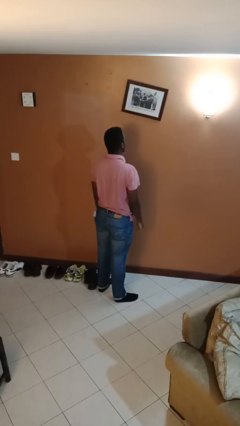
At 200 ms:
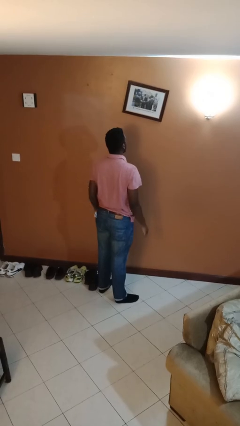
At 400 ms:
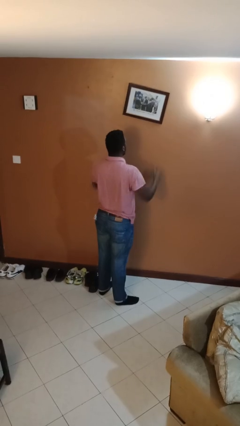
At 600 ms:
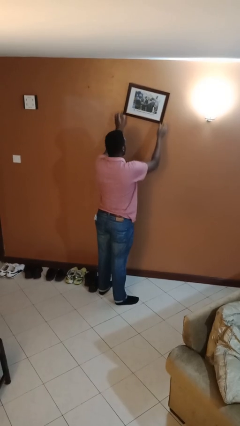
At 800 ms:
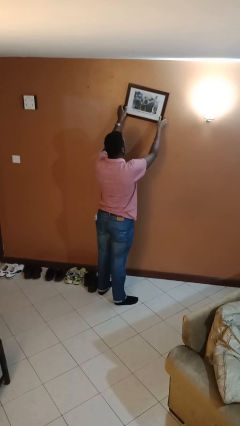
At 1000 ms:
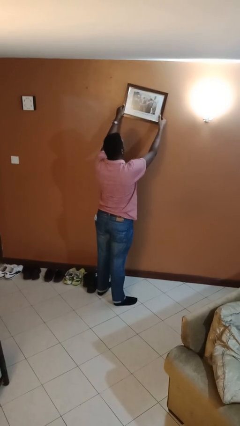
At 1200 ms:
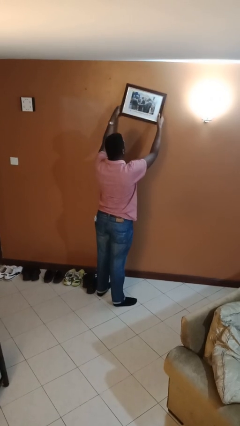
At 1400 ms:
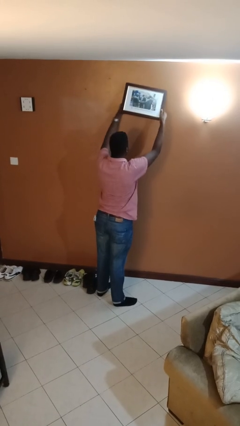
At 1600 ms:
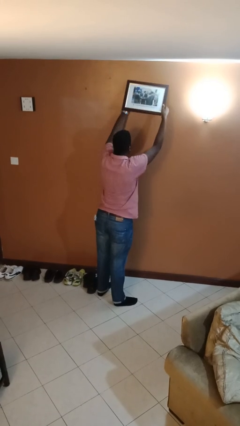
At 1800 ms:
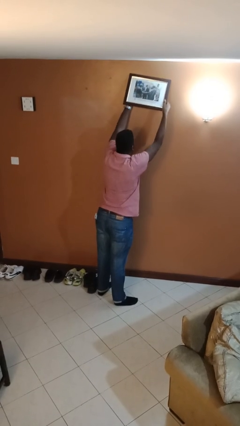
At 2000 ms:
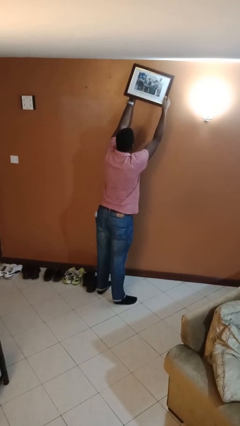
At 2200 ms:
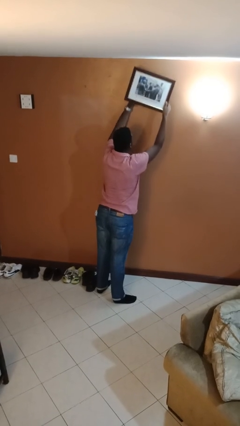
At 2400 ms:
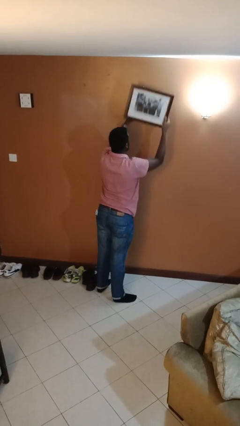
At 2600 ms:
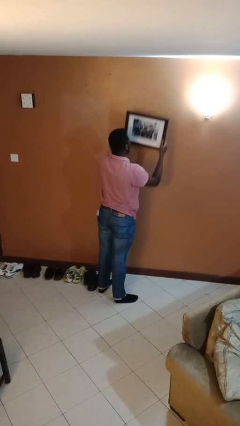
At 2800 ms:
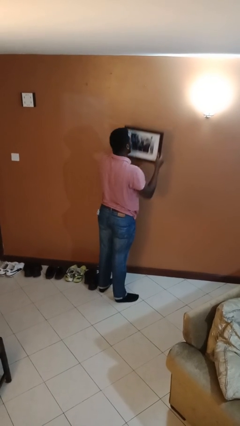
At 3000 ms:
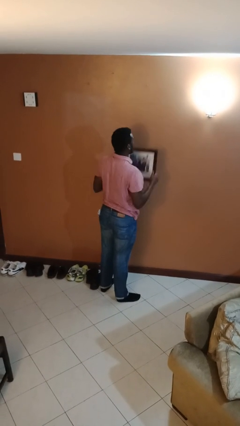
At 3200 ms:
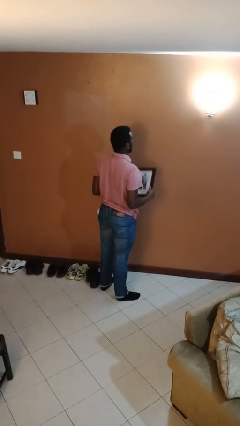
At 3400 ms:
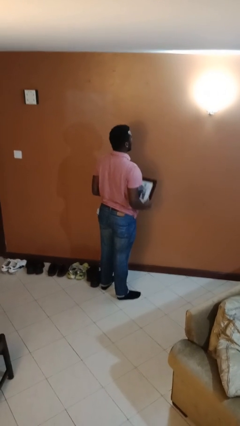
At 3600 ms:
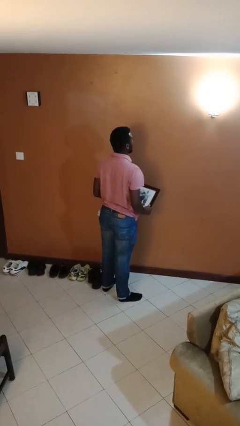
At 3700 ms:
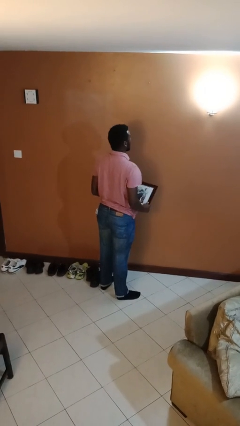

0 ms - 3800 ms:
person takes down picture frame

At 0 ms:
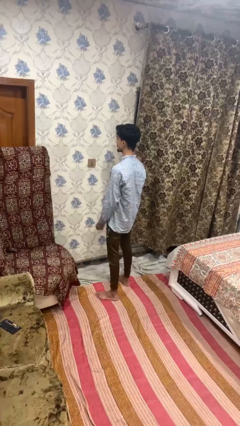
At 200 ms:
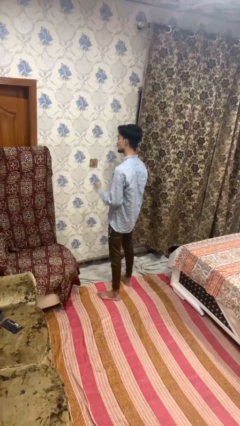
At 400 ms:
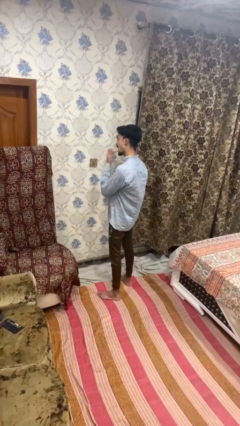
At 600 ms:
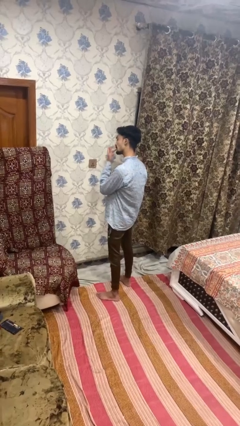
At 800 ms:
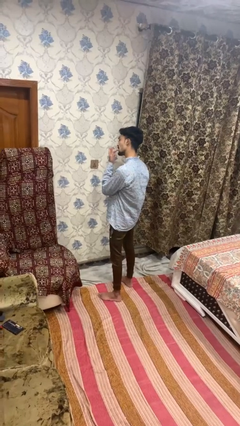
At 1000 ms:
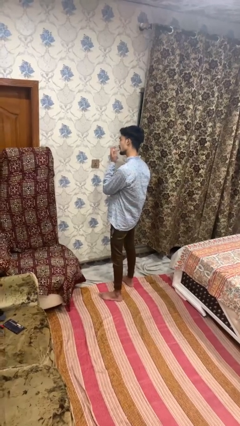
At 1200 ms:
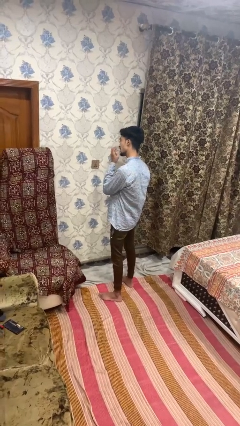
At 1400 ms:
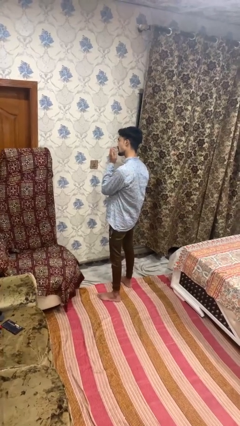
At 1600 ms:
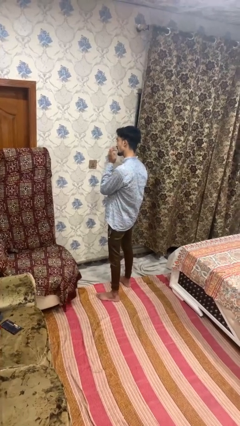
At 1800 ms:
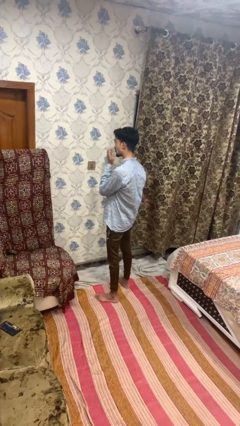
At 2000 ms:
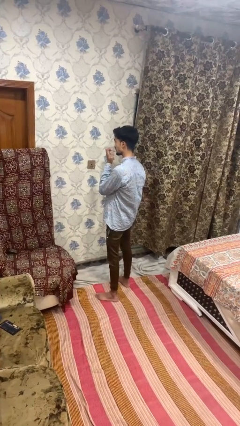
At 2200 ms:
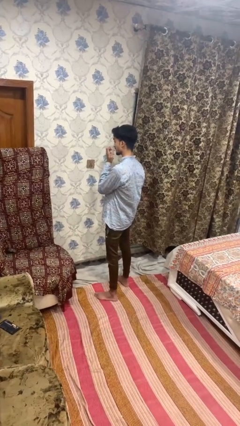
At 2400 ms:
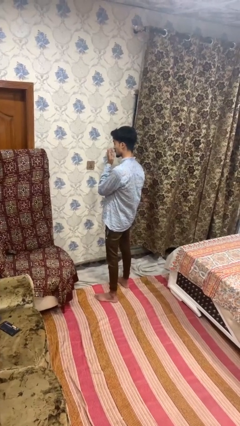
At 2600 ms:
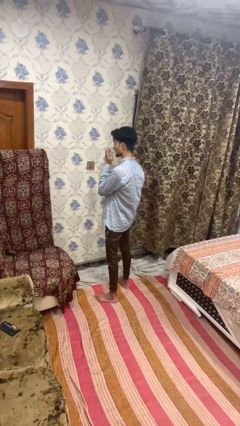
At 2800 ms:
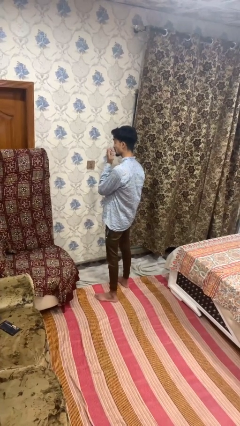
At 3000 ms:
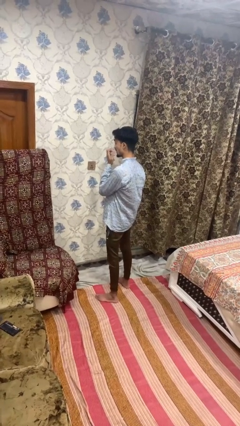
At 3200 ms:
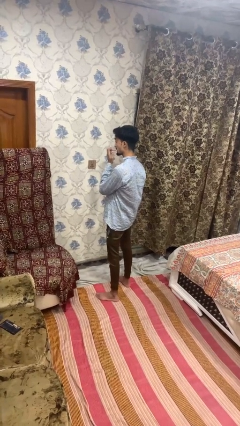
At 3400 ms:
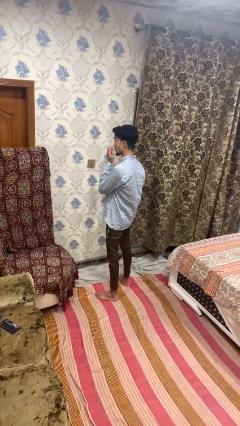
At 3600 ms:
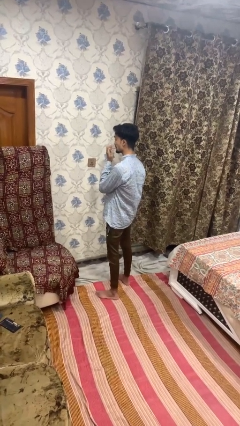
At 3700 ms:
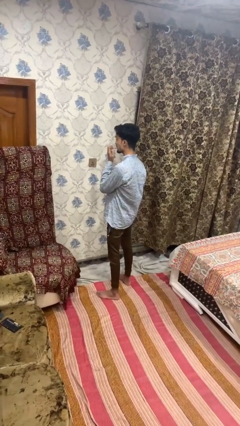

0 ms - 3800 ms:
person licks fingers

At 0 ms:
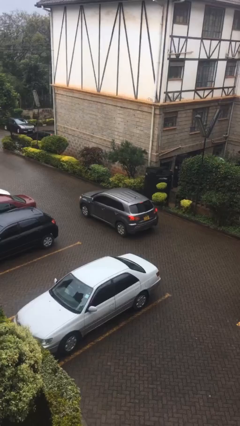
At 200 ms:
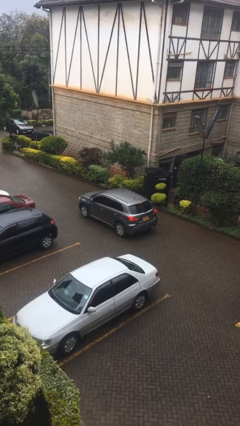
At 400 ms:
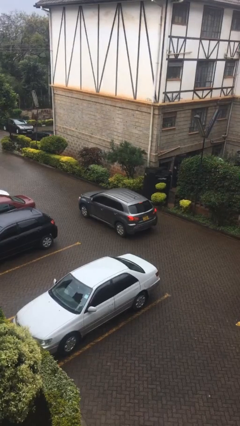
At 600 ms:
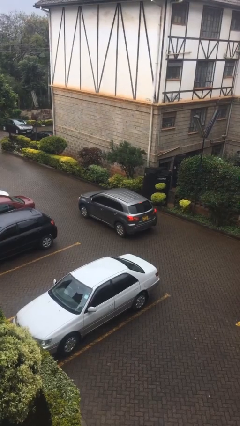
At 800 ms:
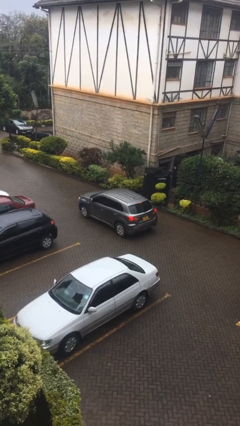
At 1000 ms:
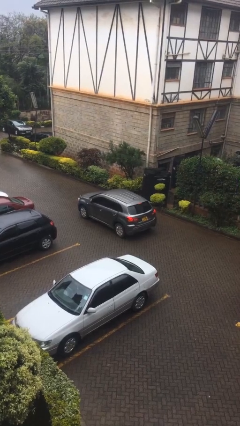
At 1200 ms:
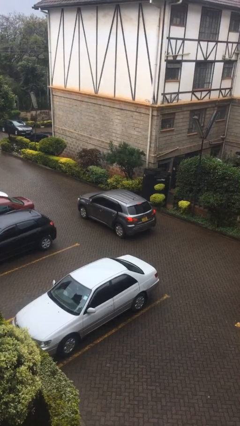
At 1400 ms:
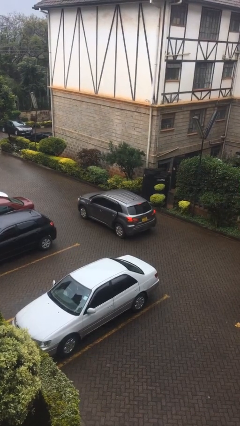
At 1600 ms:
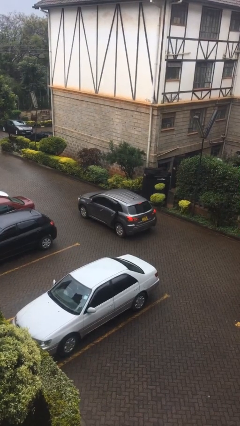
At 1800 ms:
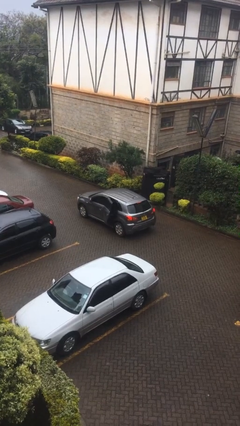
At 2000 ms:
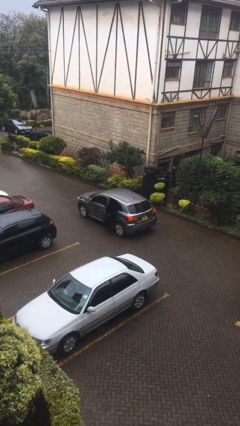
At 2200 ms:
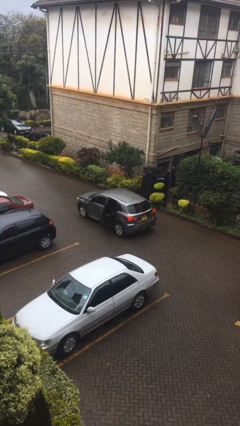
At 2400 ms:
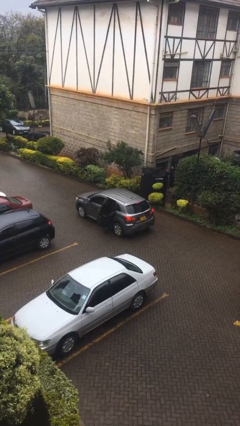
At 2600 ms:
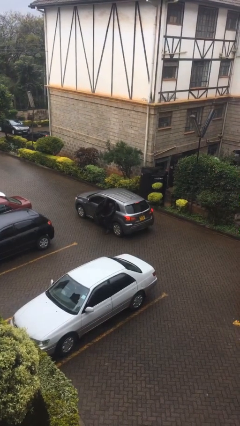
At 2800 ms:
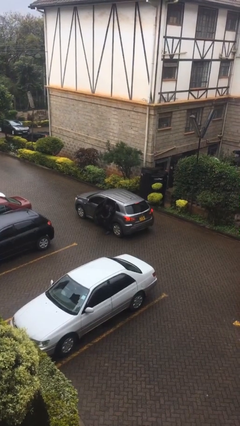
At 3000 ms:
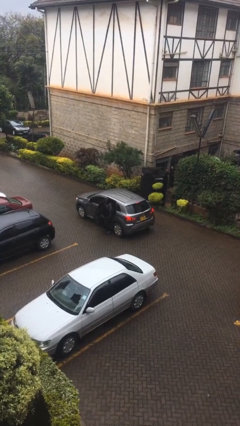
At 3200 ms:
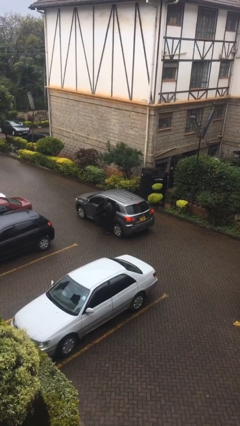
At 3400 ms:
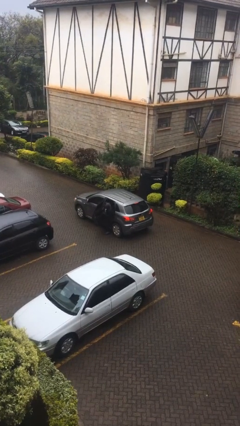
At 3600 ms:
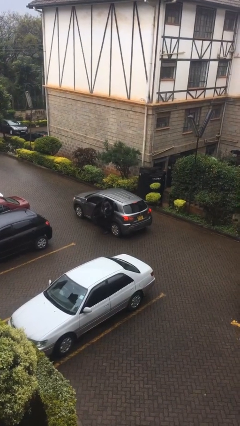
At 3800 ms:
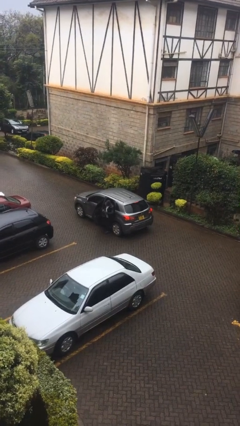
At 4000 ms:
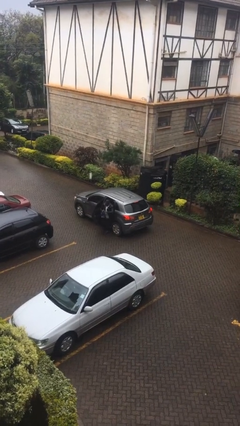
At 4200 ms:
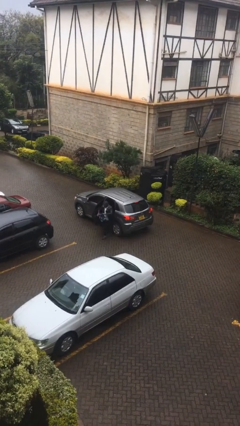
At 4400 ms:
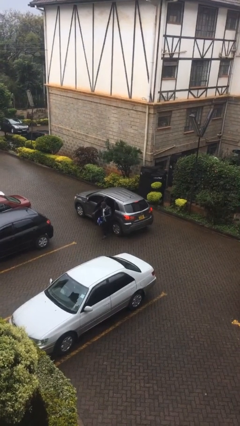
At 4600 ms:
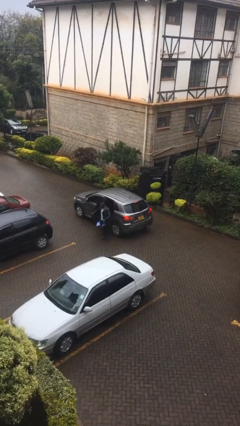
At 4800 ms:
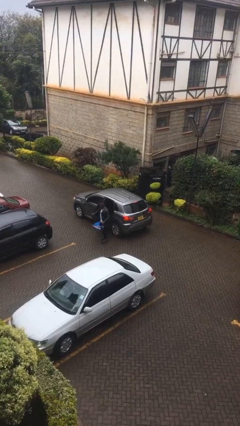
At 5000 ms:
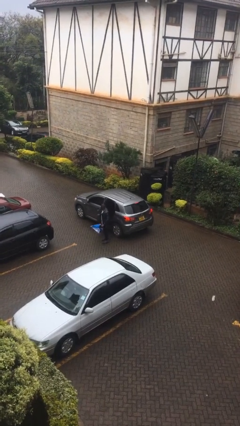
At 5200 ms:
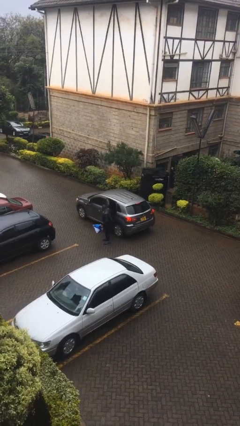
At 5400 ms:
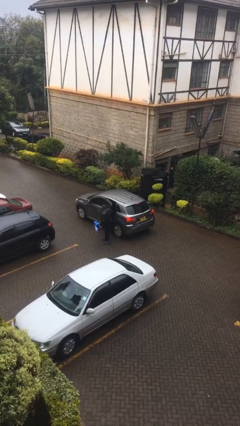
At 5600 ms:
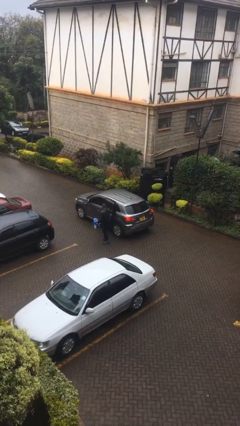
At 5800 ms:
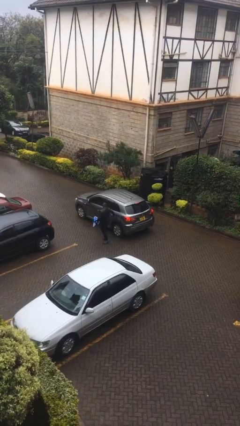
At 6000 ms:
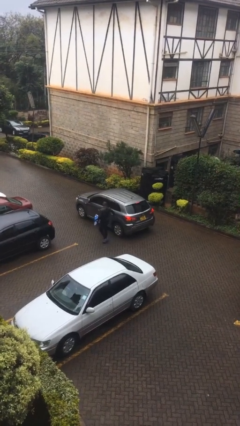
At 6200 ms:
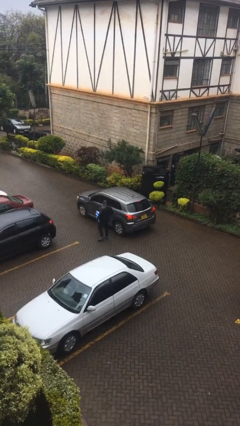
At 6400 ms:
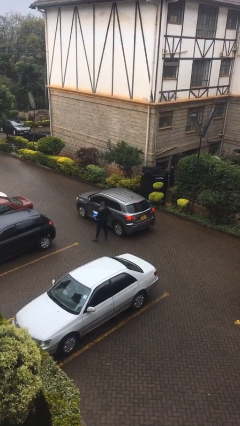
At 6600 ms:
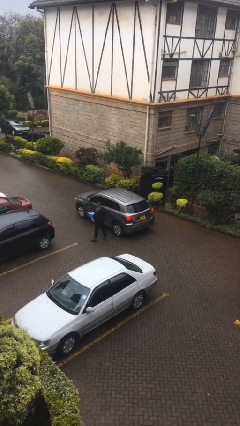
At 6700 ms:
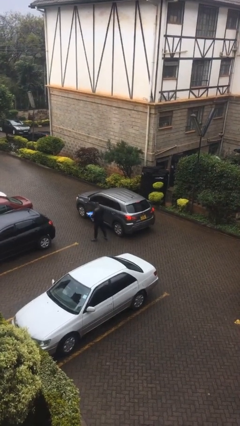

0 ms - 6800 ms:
car drops off person

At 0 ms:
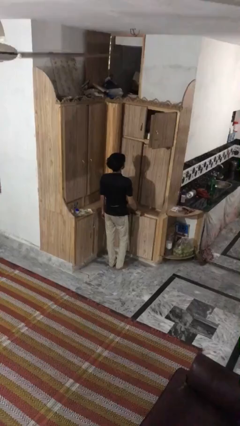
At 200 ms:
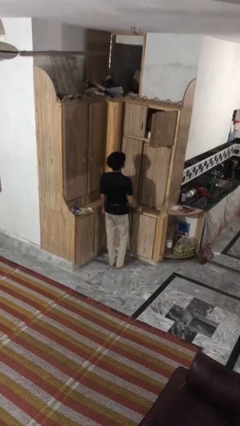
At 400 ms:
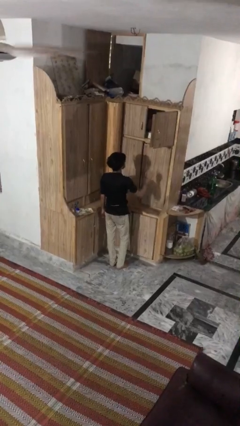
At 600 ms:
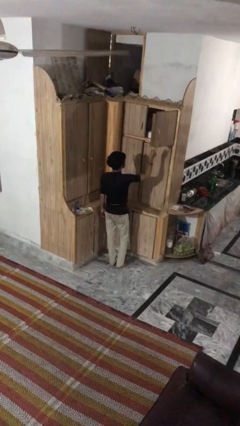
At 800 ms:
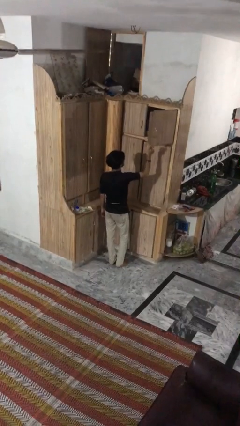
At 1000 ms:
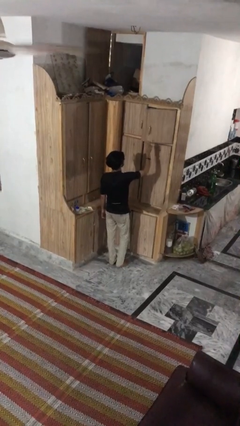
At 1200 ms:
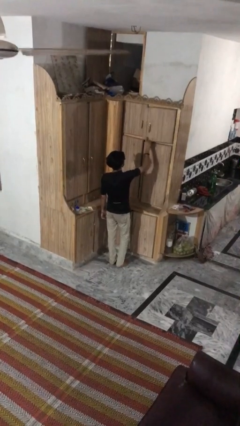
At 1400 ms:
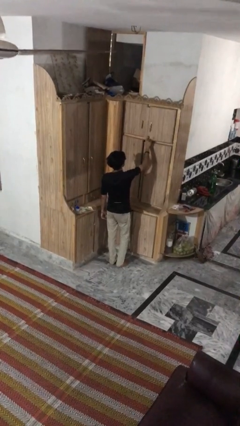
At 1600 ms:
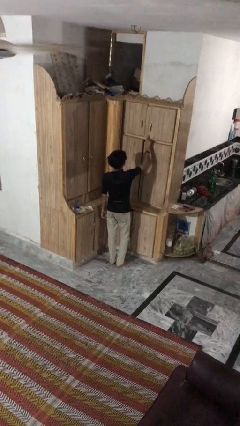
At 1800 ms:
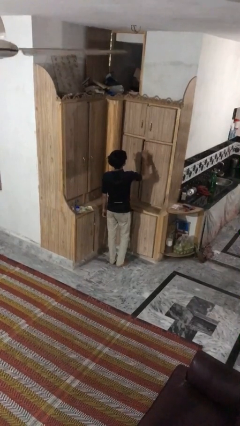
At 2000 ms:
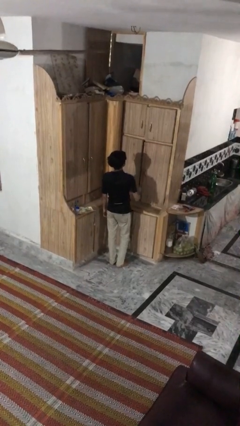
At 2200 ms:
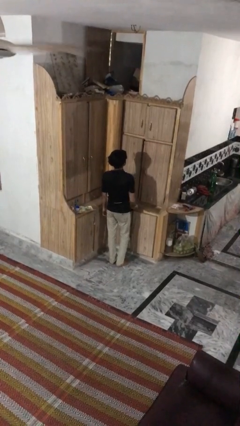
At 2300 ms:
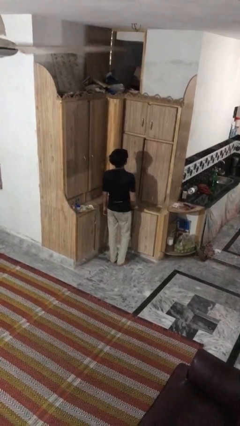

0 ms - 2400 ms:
person closes cabinet

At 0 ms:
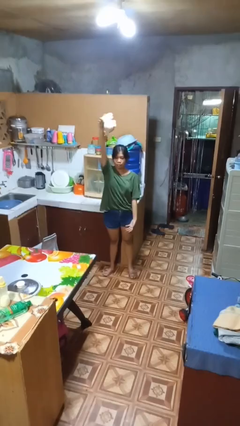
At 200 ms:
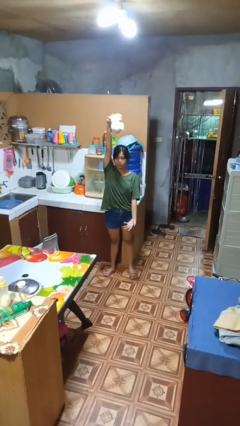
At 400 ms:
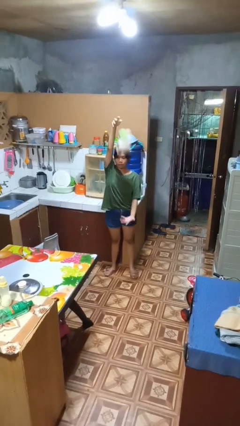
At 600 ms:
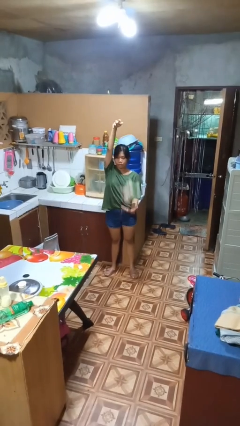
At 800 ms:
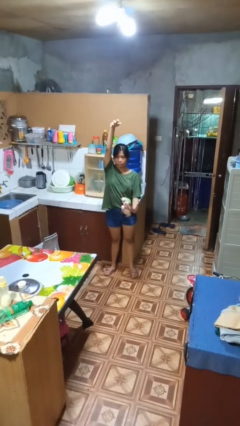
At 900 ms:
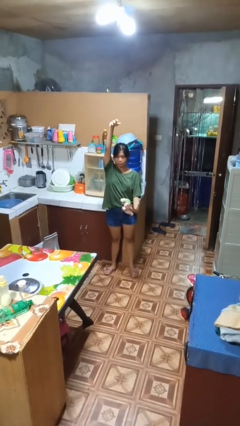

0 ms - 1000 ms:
person drops object
